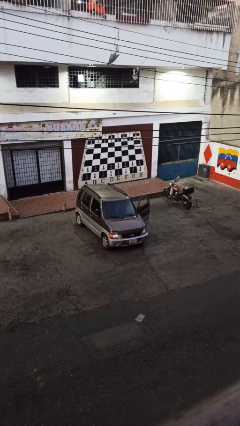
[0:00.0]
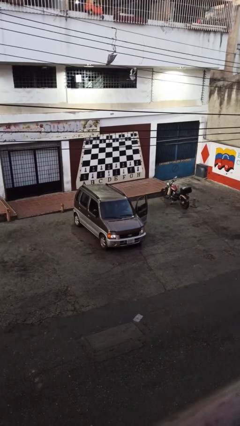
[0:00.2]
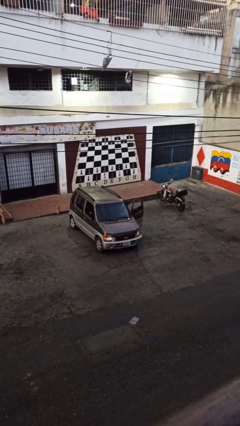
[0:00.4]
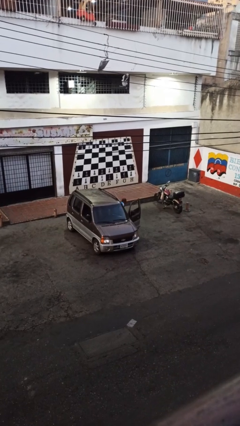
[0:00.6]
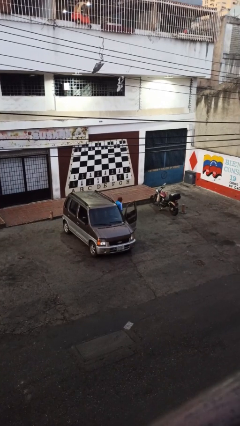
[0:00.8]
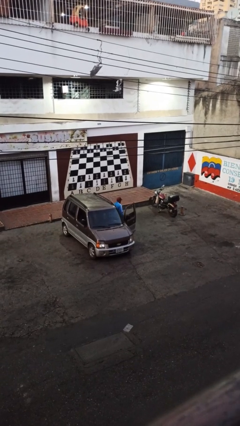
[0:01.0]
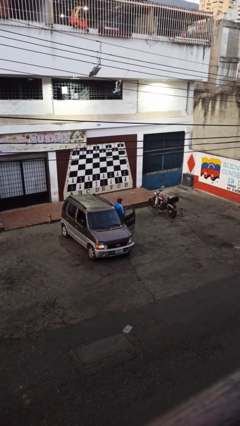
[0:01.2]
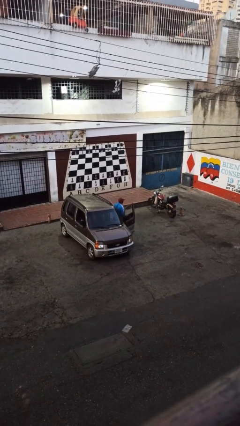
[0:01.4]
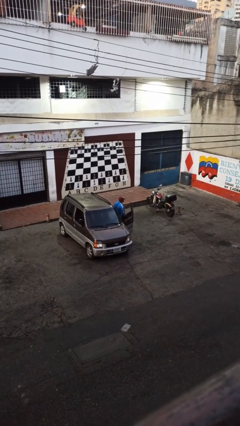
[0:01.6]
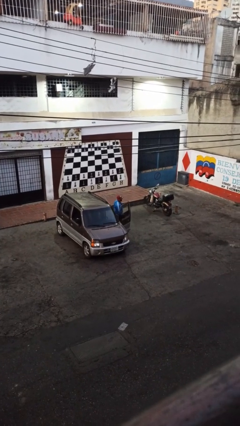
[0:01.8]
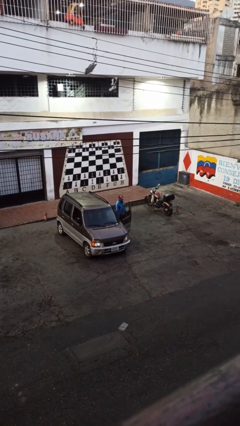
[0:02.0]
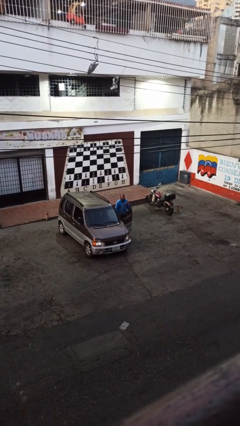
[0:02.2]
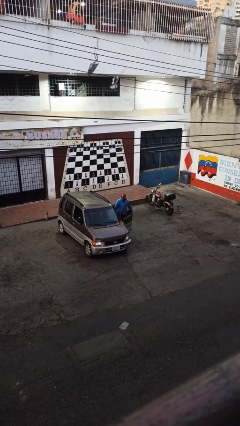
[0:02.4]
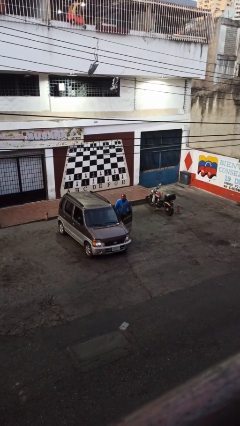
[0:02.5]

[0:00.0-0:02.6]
person exits car

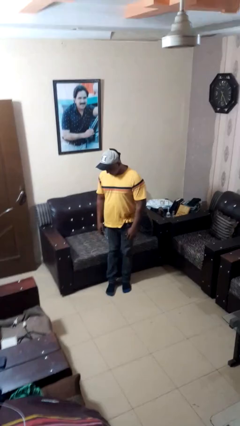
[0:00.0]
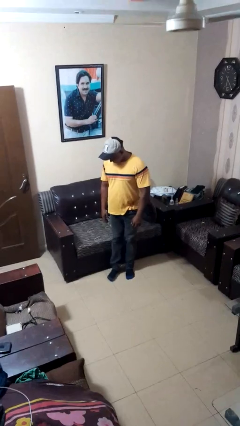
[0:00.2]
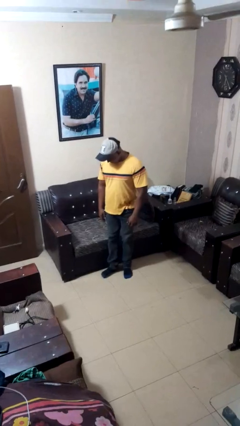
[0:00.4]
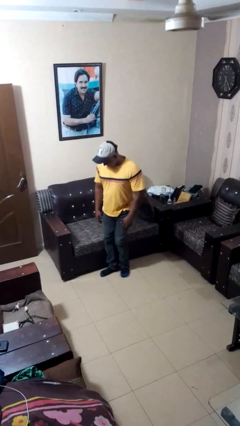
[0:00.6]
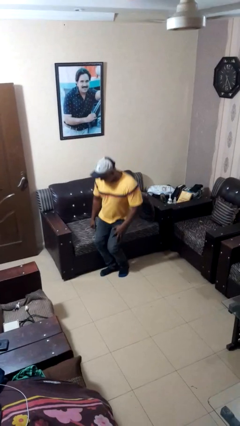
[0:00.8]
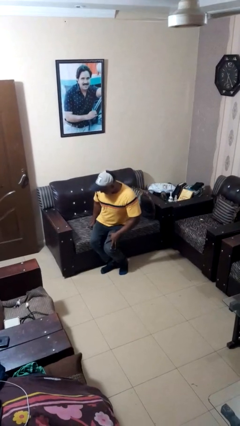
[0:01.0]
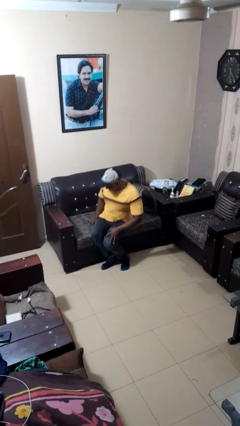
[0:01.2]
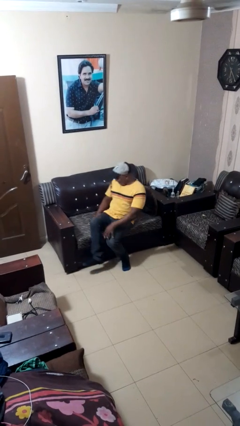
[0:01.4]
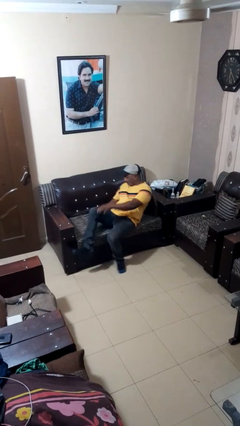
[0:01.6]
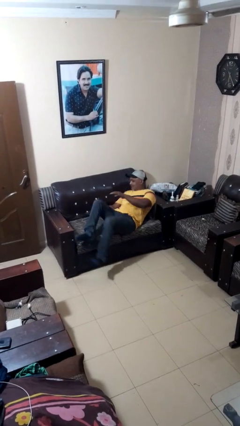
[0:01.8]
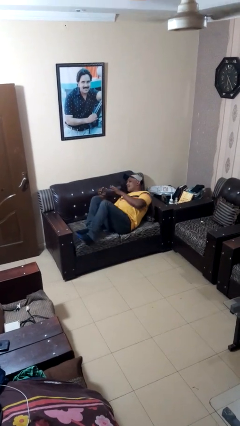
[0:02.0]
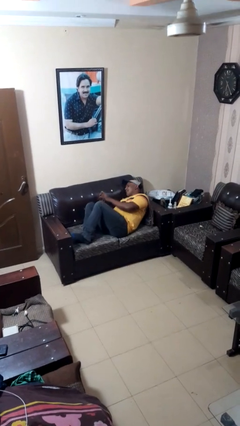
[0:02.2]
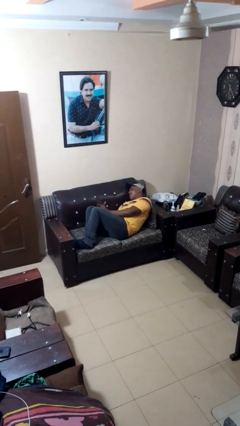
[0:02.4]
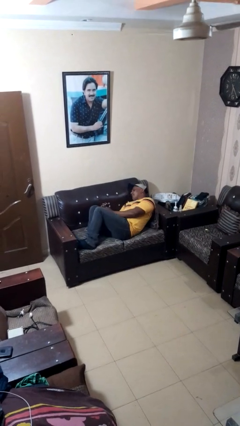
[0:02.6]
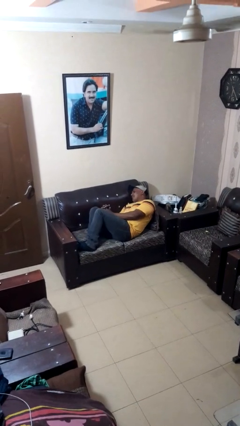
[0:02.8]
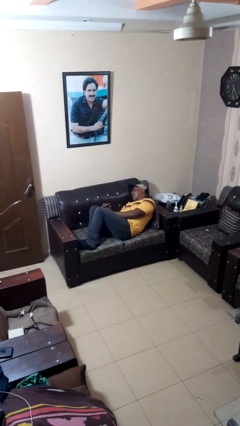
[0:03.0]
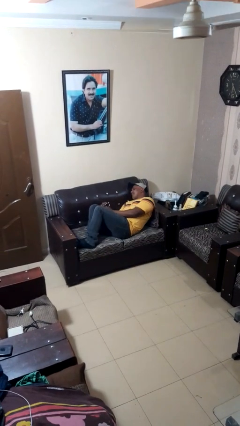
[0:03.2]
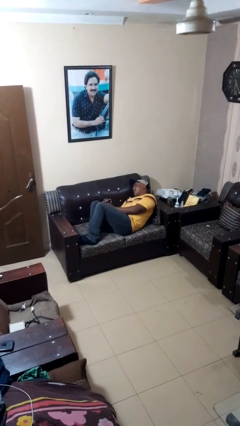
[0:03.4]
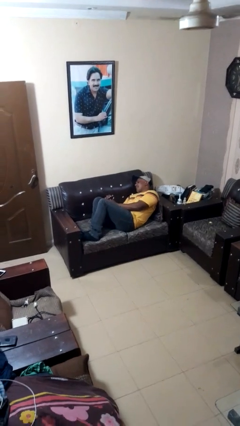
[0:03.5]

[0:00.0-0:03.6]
person lies down on couch

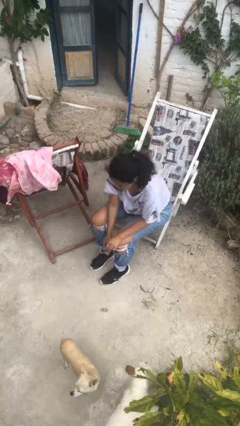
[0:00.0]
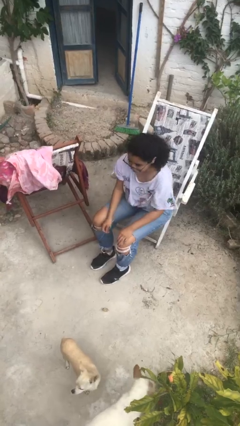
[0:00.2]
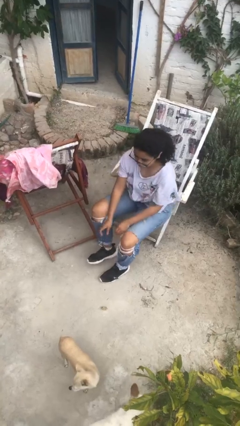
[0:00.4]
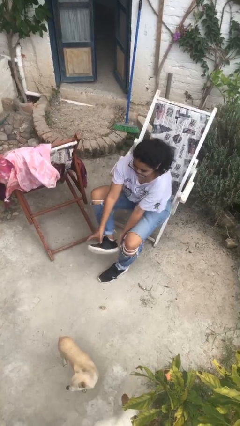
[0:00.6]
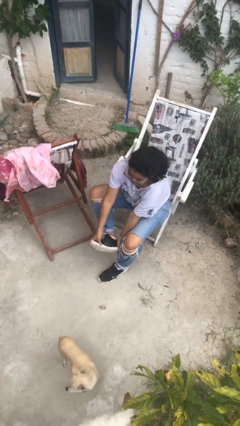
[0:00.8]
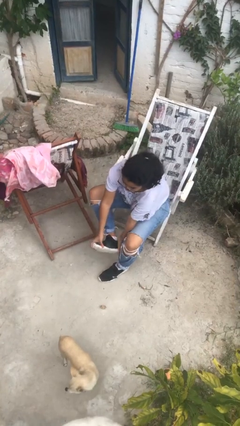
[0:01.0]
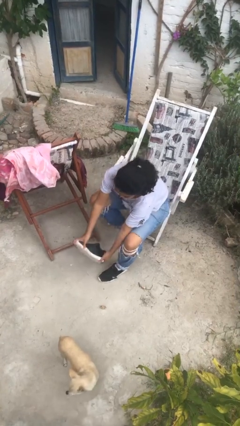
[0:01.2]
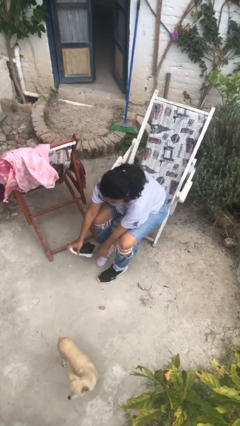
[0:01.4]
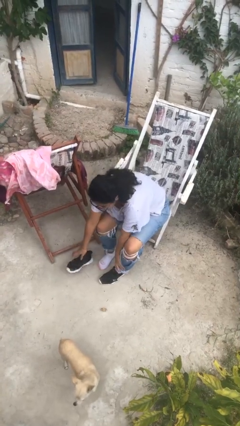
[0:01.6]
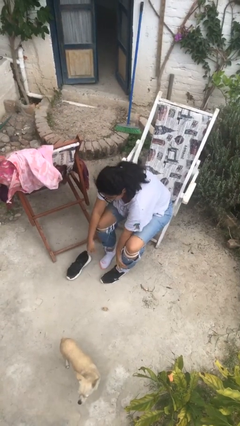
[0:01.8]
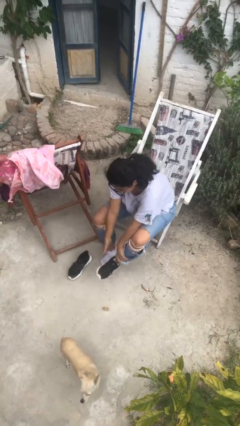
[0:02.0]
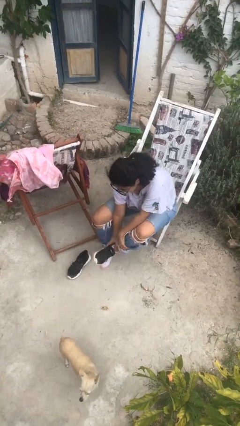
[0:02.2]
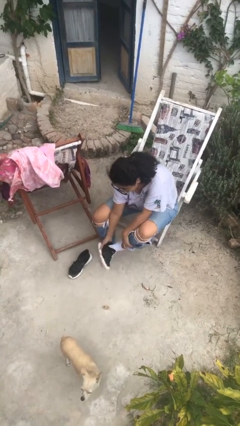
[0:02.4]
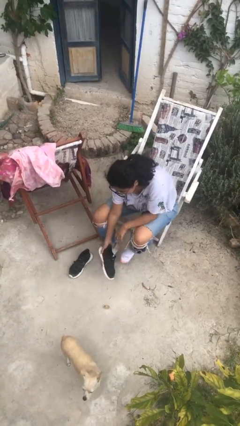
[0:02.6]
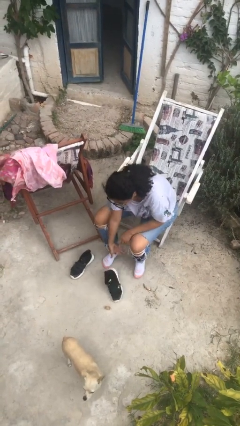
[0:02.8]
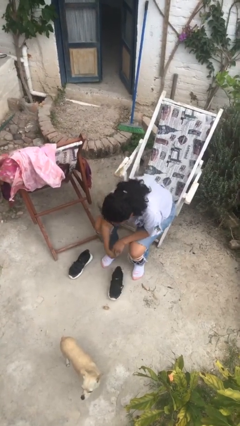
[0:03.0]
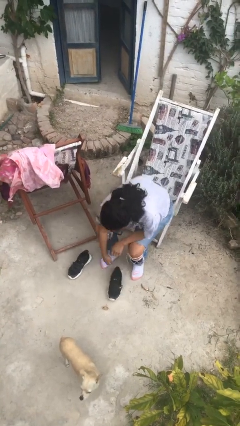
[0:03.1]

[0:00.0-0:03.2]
person takes off shoes

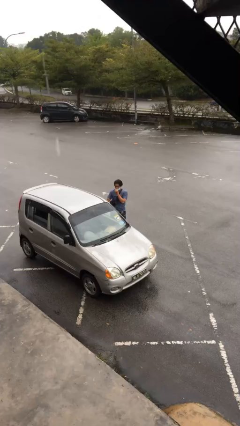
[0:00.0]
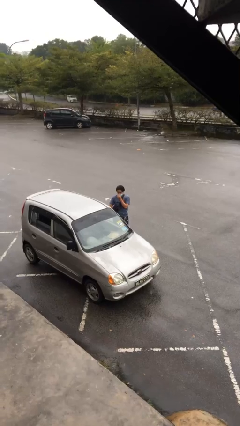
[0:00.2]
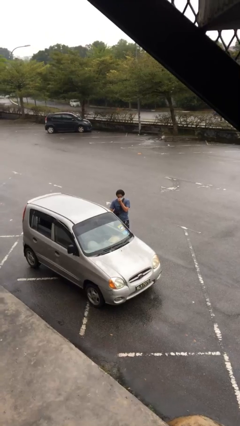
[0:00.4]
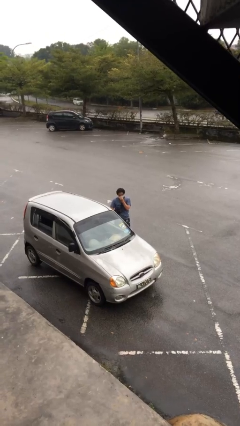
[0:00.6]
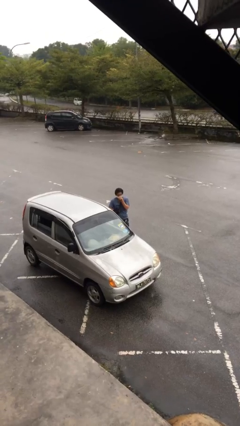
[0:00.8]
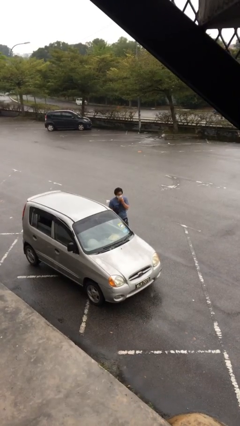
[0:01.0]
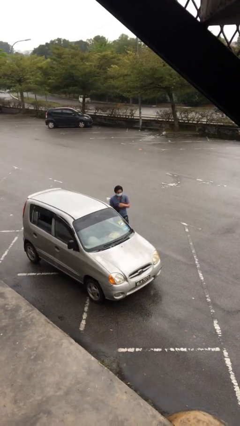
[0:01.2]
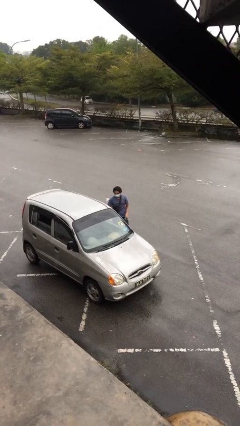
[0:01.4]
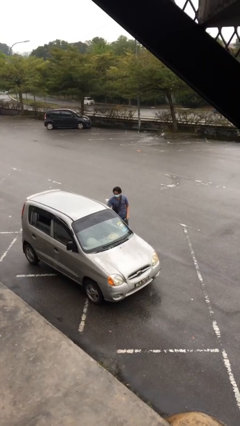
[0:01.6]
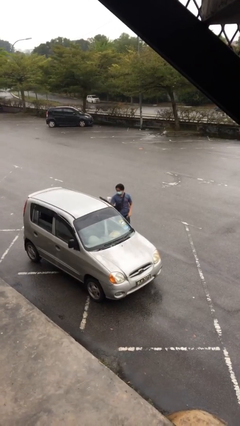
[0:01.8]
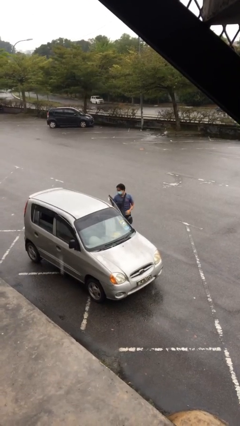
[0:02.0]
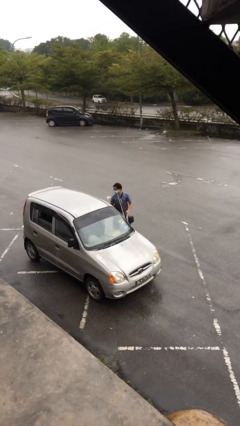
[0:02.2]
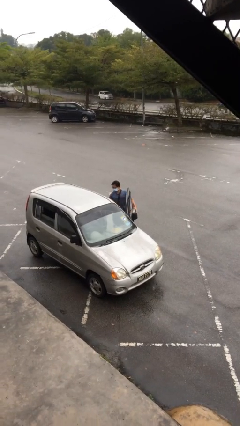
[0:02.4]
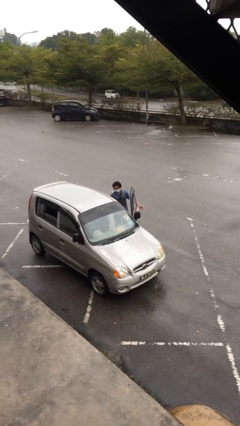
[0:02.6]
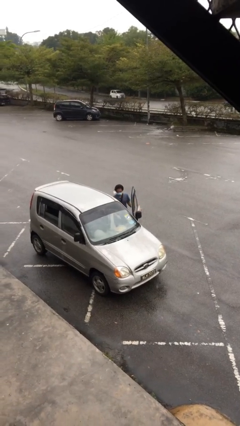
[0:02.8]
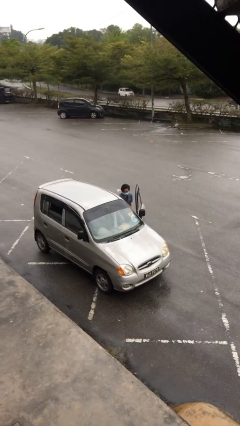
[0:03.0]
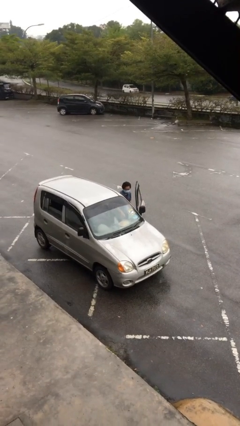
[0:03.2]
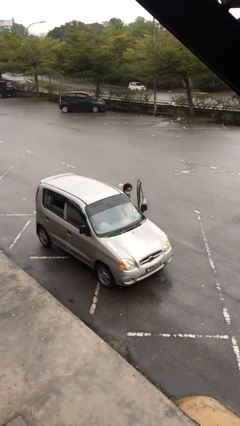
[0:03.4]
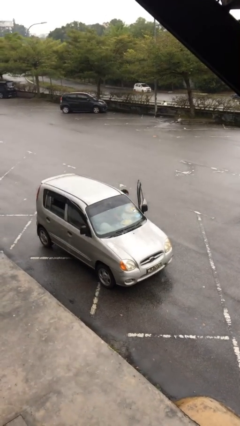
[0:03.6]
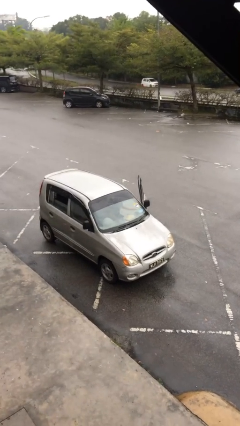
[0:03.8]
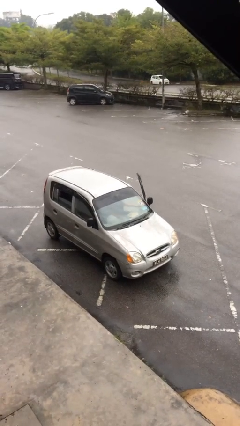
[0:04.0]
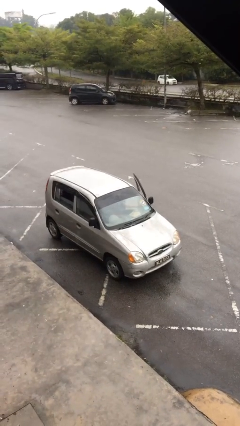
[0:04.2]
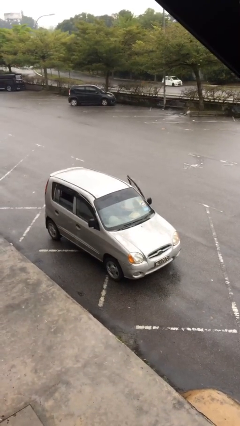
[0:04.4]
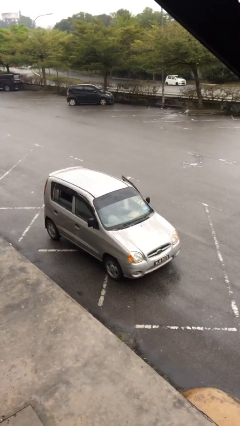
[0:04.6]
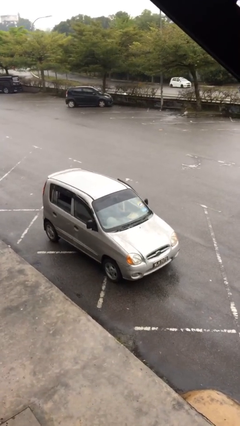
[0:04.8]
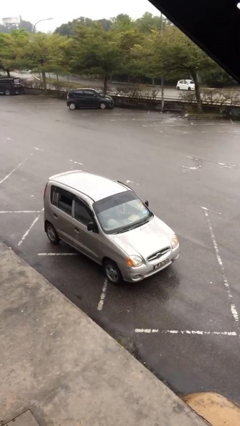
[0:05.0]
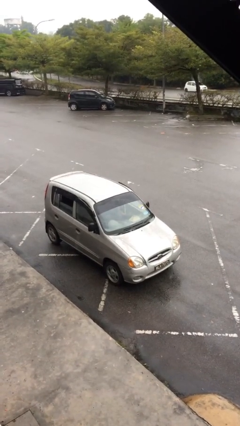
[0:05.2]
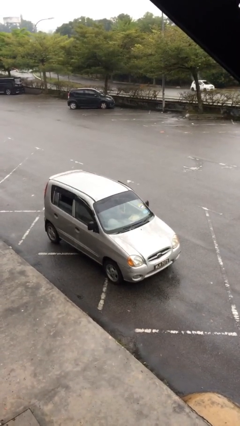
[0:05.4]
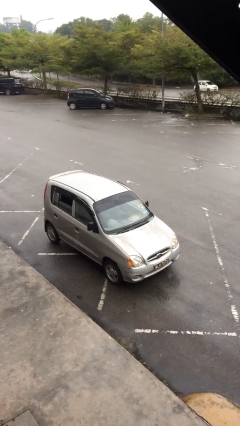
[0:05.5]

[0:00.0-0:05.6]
person enters car

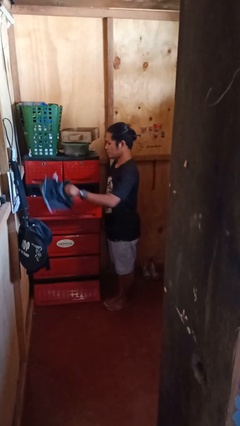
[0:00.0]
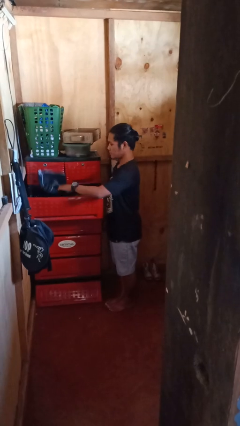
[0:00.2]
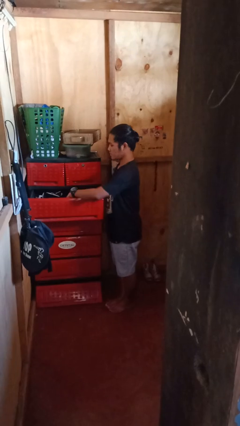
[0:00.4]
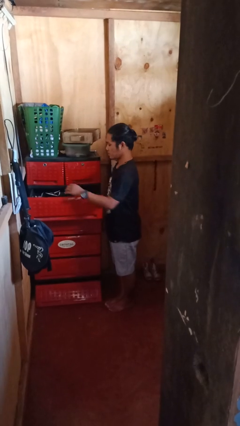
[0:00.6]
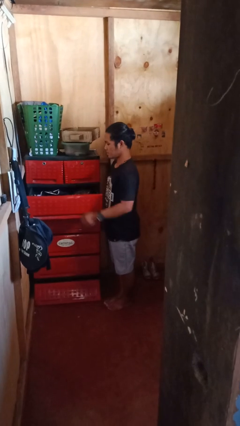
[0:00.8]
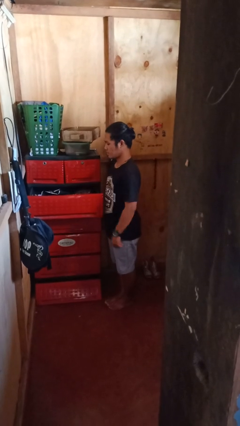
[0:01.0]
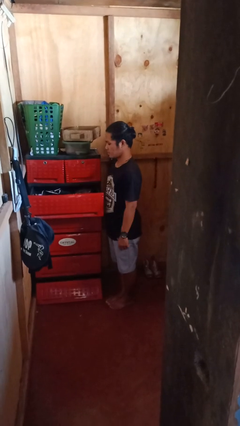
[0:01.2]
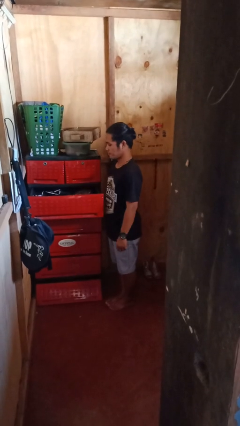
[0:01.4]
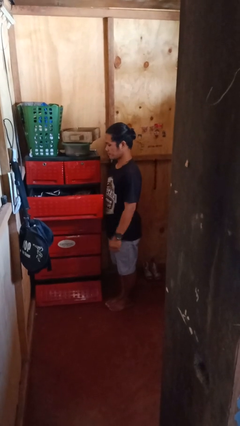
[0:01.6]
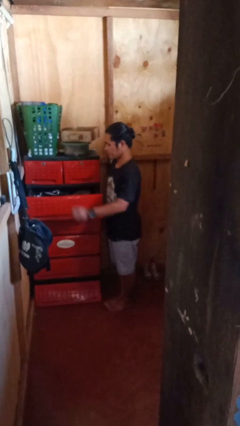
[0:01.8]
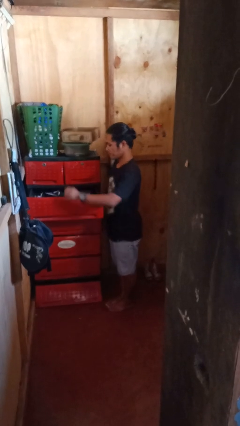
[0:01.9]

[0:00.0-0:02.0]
person puts clothes into dresser

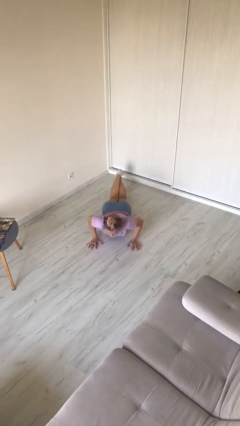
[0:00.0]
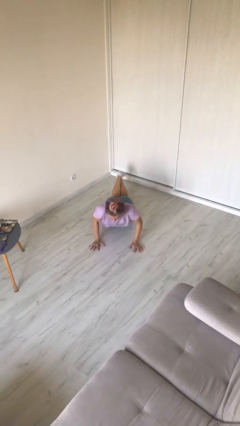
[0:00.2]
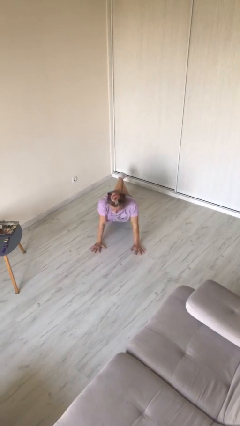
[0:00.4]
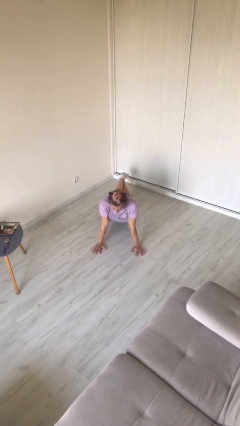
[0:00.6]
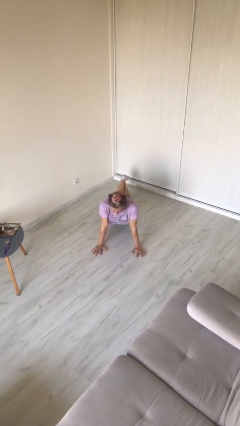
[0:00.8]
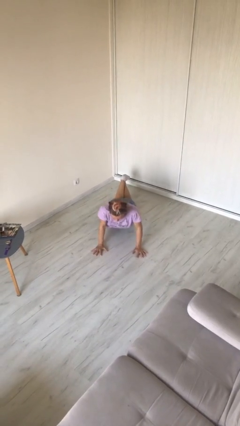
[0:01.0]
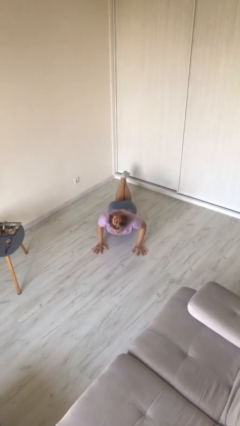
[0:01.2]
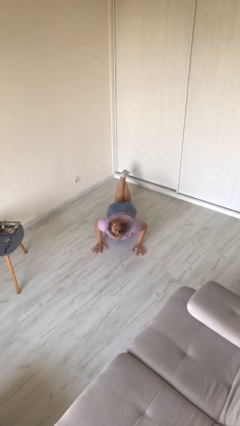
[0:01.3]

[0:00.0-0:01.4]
person exercises with pushup
